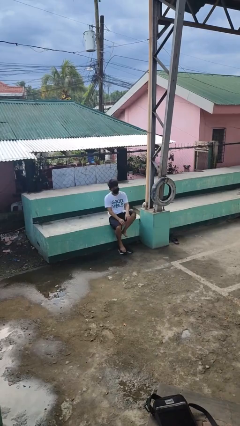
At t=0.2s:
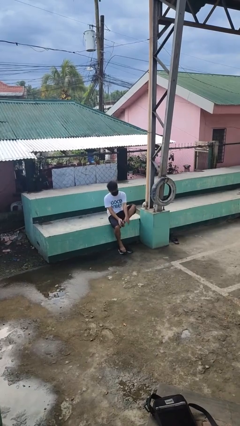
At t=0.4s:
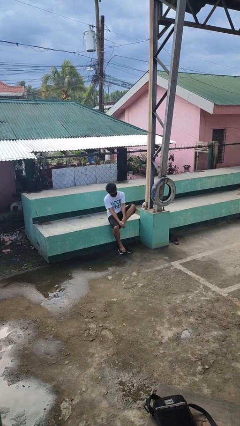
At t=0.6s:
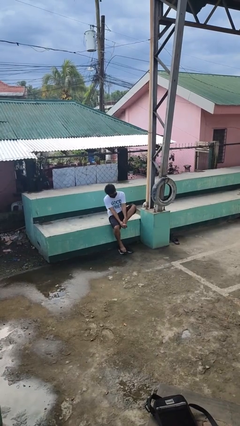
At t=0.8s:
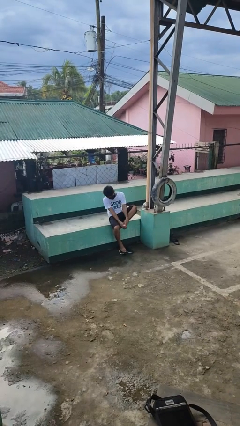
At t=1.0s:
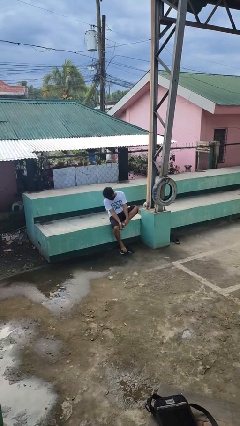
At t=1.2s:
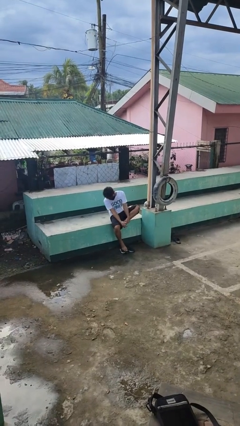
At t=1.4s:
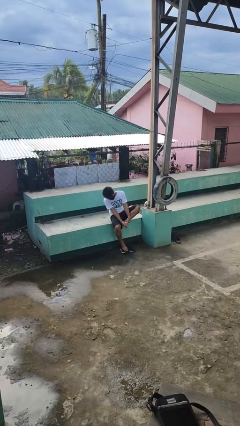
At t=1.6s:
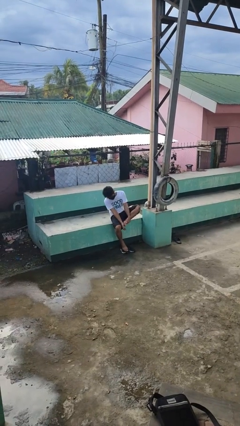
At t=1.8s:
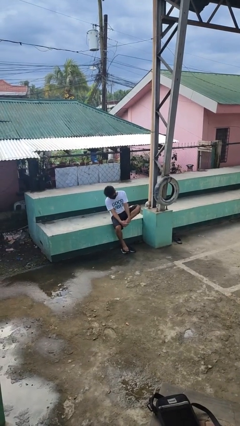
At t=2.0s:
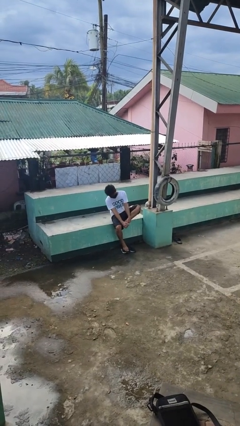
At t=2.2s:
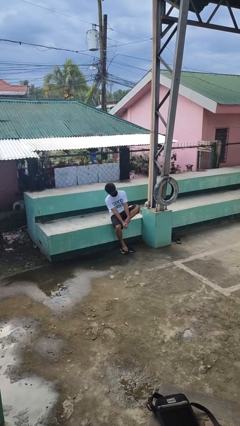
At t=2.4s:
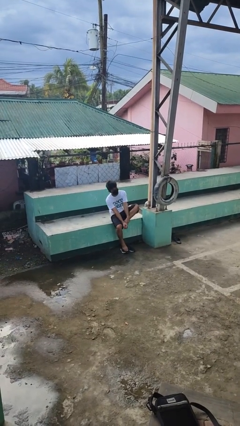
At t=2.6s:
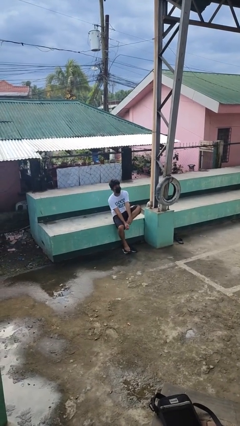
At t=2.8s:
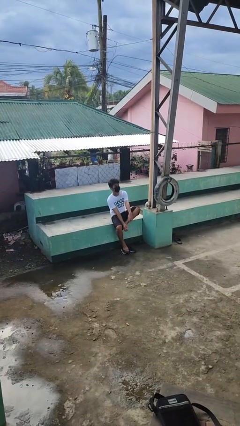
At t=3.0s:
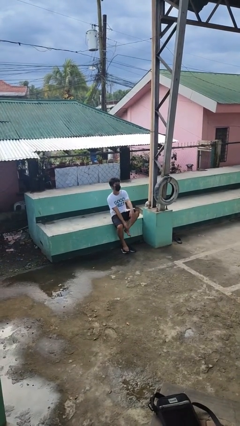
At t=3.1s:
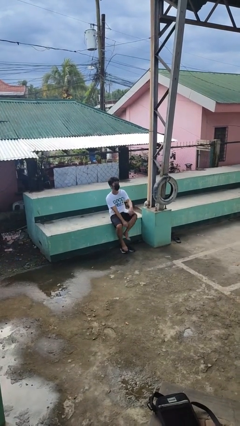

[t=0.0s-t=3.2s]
person rubs foot

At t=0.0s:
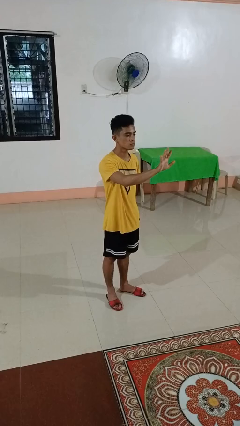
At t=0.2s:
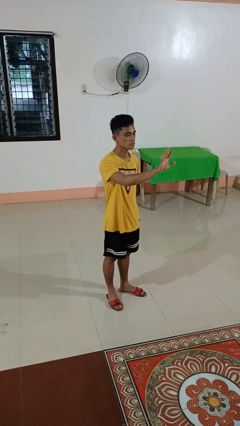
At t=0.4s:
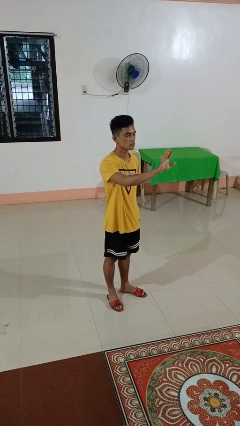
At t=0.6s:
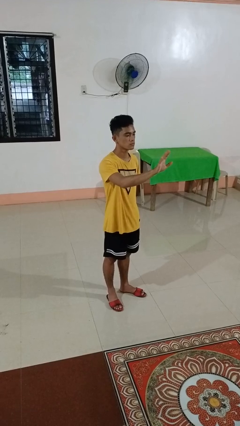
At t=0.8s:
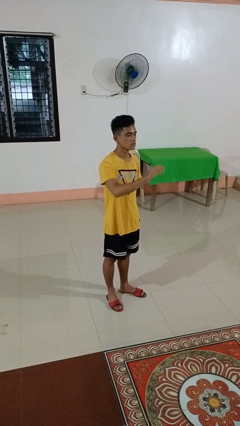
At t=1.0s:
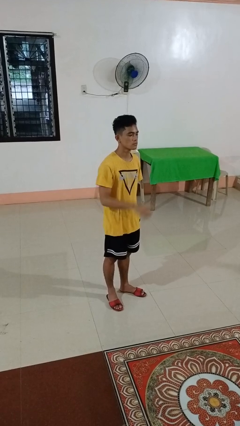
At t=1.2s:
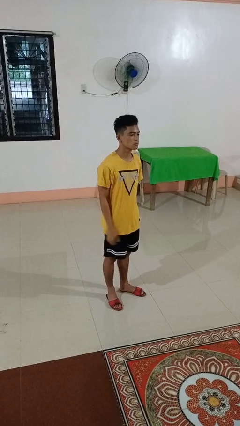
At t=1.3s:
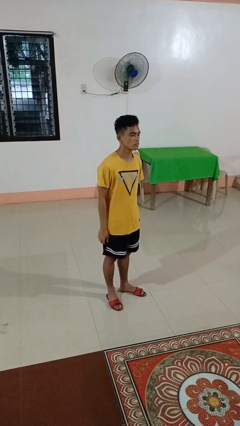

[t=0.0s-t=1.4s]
person gestures number five

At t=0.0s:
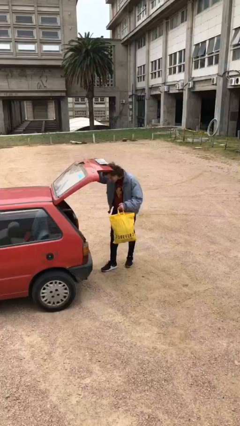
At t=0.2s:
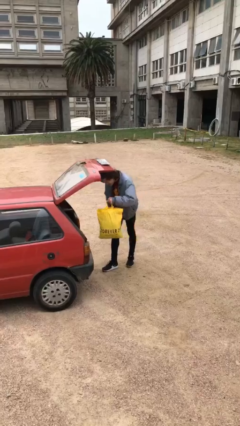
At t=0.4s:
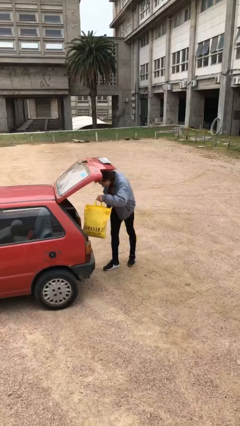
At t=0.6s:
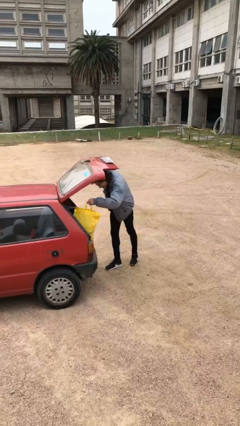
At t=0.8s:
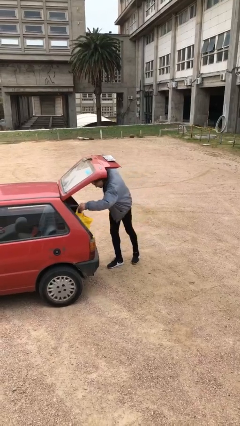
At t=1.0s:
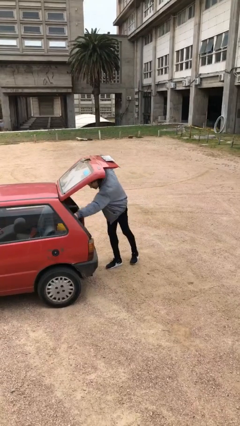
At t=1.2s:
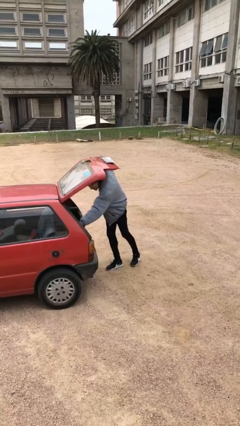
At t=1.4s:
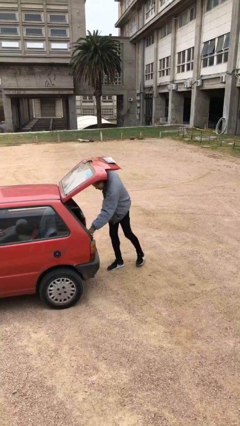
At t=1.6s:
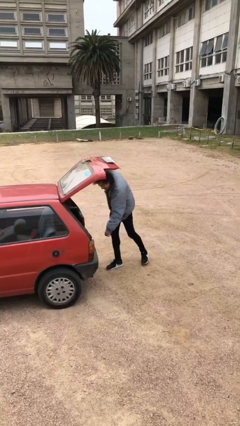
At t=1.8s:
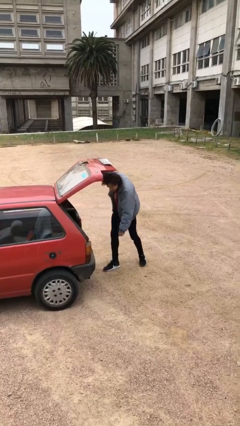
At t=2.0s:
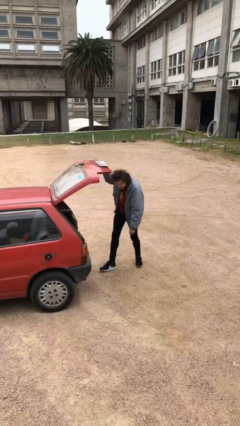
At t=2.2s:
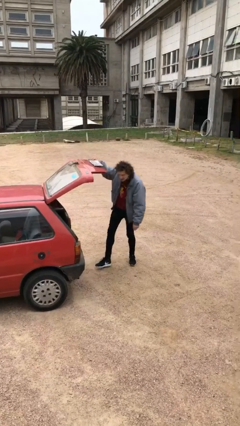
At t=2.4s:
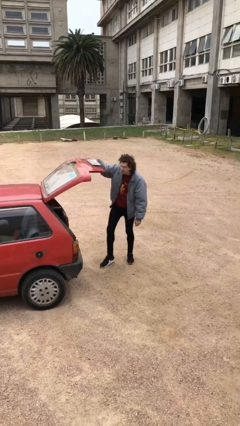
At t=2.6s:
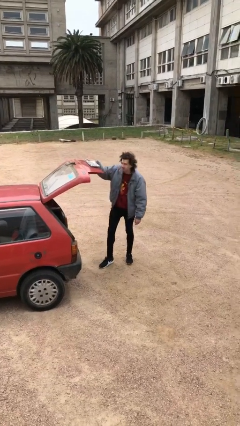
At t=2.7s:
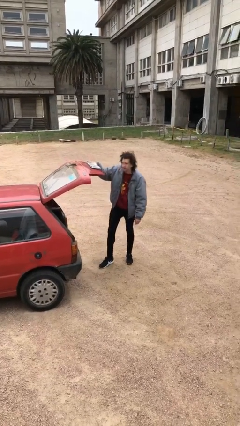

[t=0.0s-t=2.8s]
person loads car

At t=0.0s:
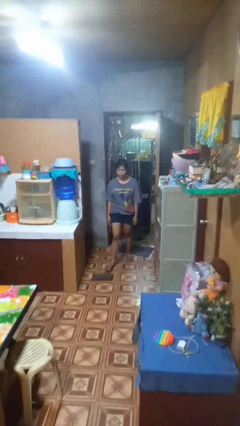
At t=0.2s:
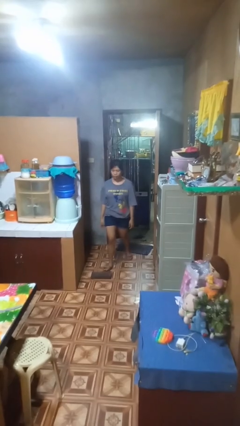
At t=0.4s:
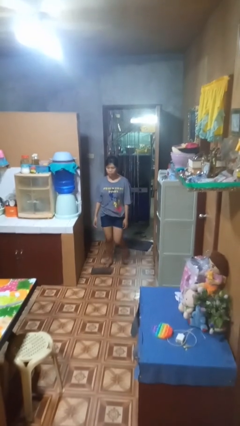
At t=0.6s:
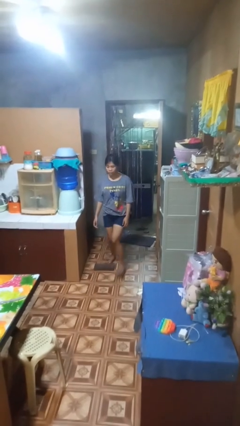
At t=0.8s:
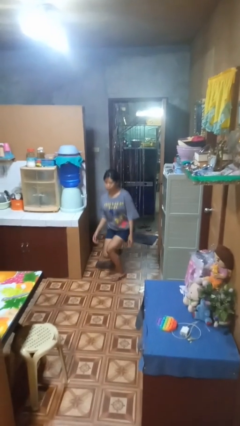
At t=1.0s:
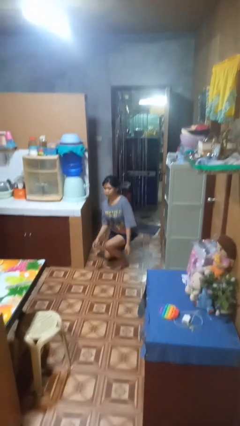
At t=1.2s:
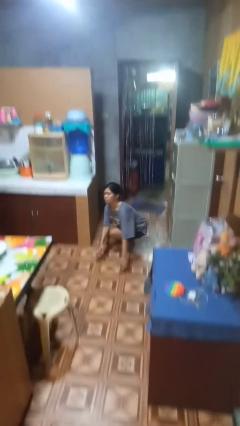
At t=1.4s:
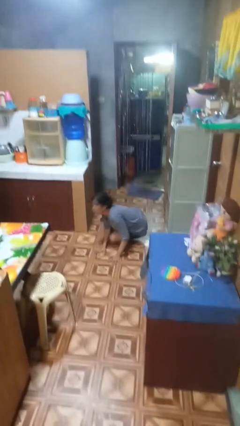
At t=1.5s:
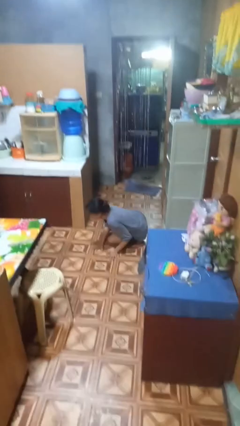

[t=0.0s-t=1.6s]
person trips on object on floor

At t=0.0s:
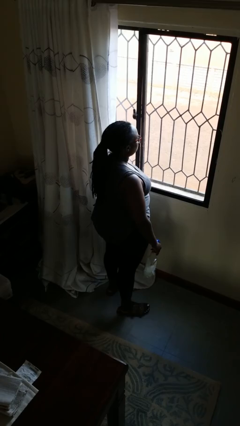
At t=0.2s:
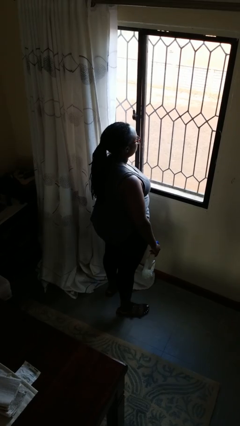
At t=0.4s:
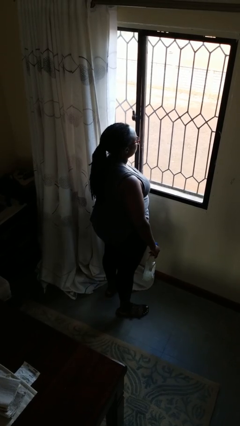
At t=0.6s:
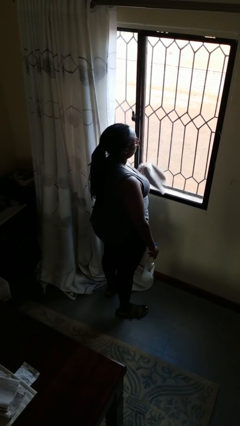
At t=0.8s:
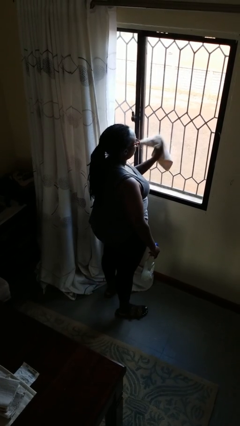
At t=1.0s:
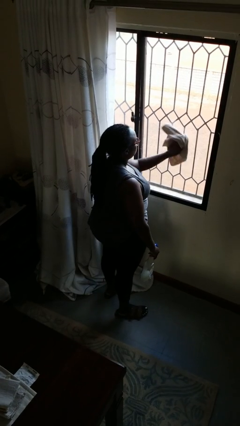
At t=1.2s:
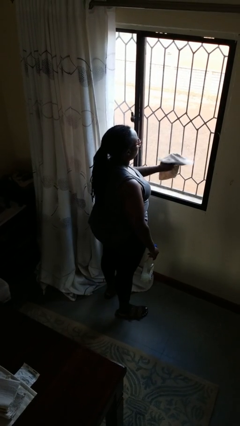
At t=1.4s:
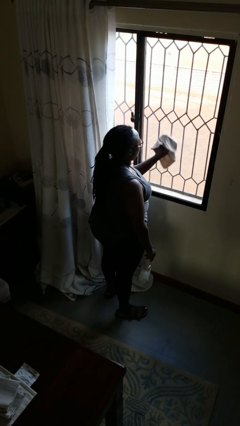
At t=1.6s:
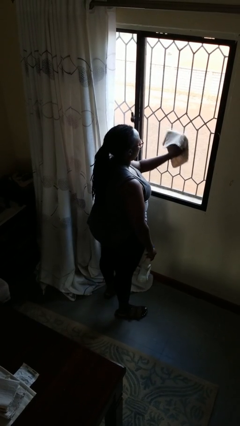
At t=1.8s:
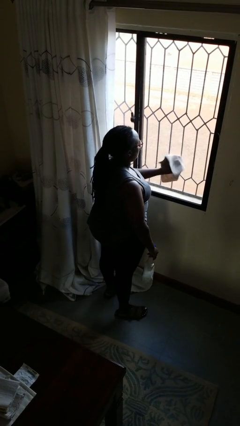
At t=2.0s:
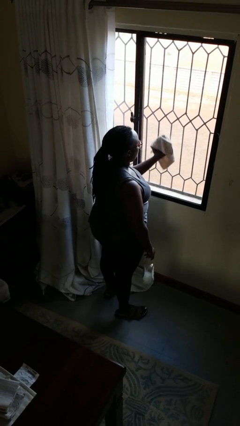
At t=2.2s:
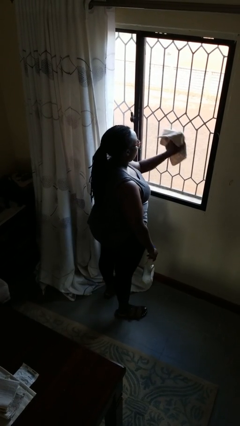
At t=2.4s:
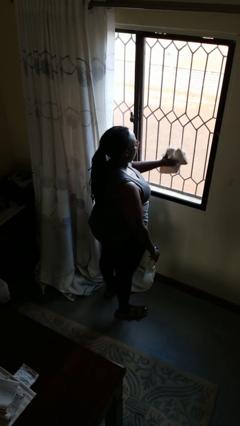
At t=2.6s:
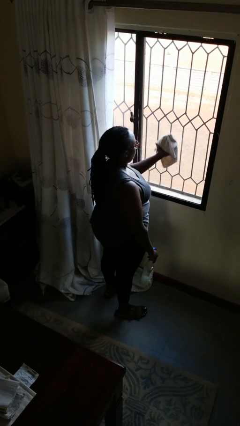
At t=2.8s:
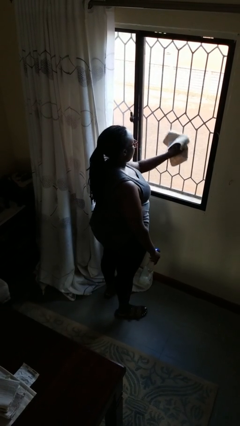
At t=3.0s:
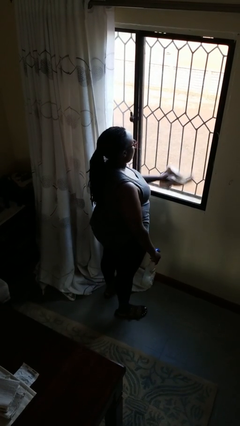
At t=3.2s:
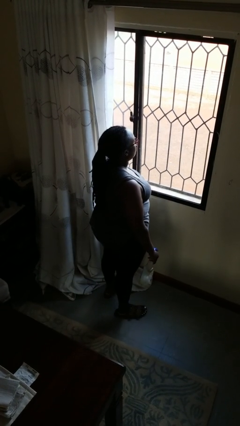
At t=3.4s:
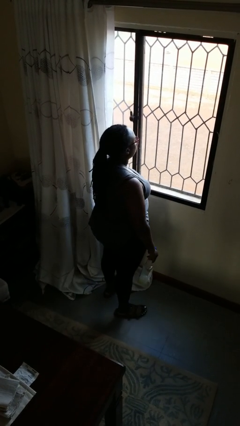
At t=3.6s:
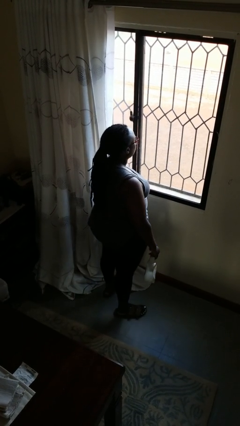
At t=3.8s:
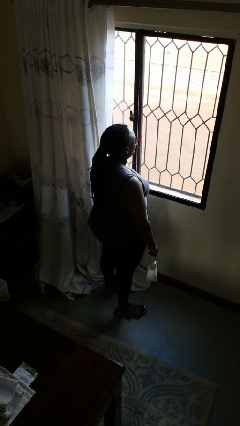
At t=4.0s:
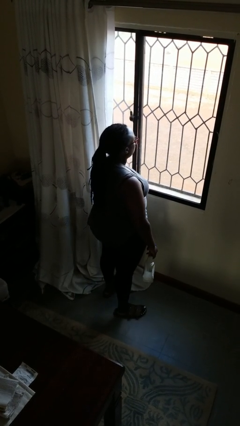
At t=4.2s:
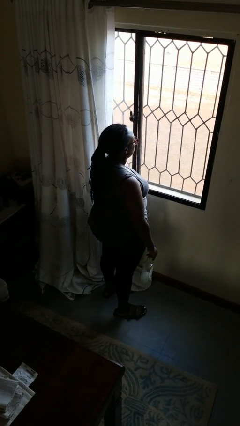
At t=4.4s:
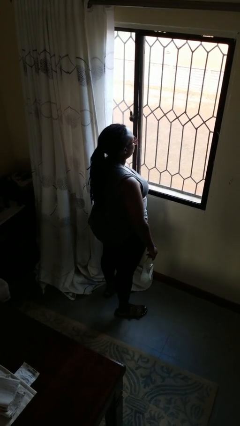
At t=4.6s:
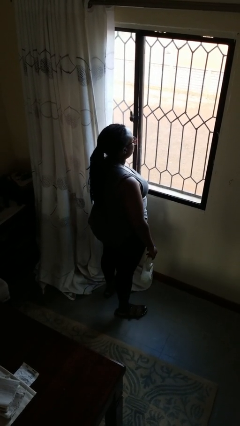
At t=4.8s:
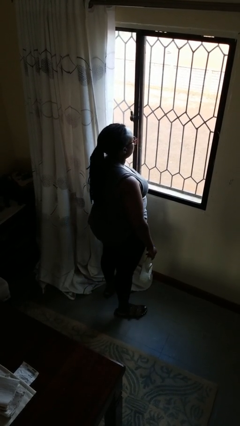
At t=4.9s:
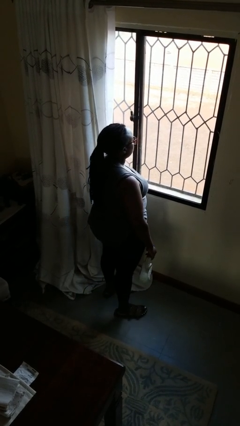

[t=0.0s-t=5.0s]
person washes window

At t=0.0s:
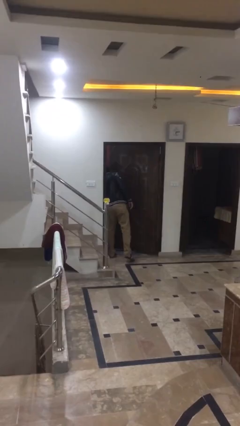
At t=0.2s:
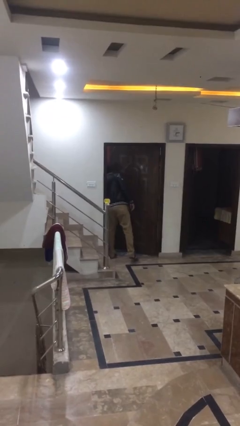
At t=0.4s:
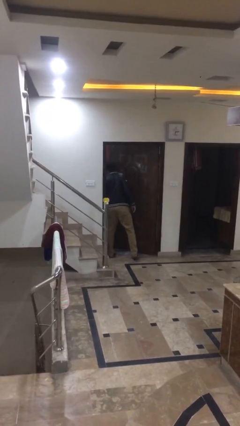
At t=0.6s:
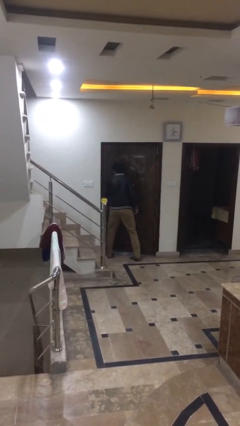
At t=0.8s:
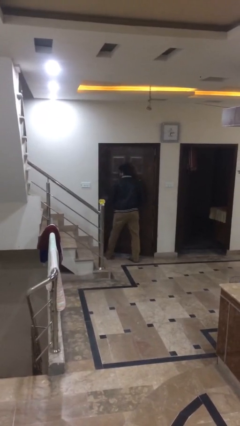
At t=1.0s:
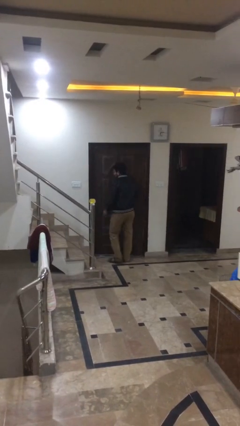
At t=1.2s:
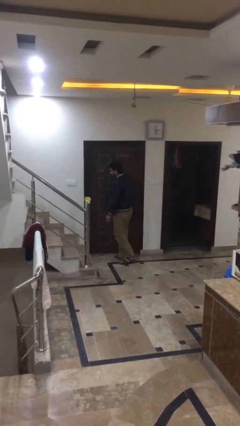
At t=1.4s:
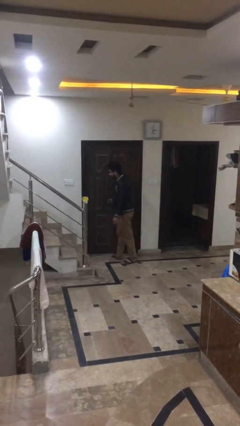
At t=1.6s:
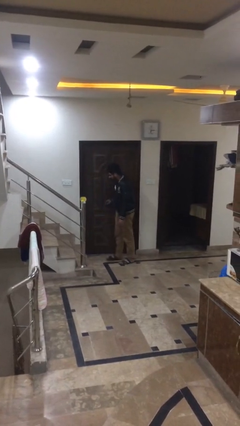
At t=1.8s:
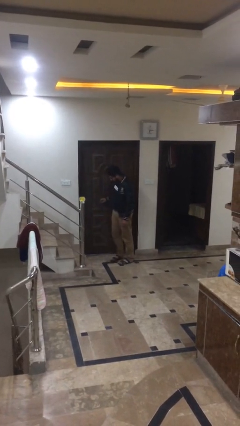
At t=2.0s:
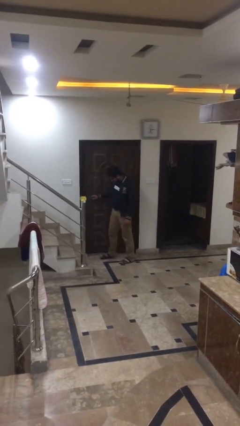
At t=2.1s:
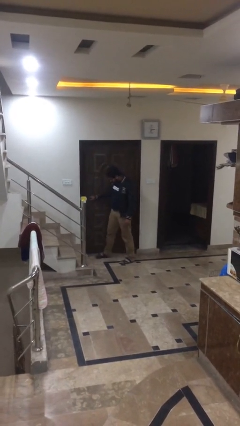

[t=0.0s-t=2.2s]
person closes facility door

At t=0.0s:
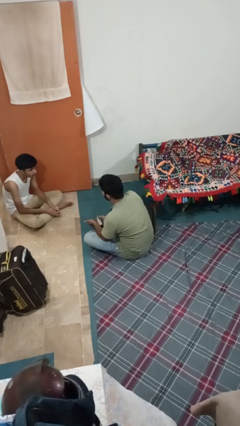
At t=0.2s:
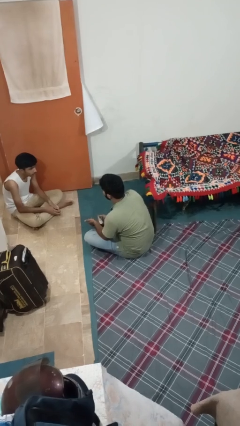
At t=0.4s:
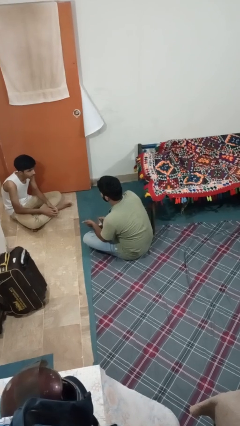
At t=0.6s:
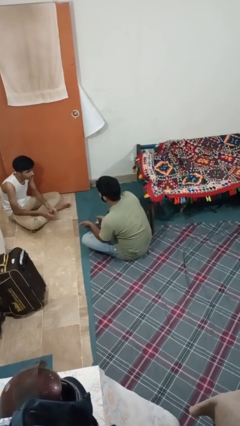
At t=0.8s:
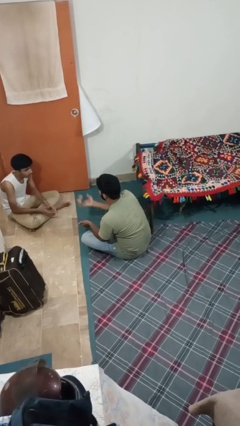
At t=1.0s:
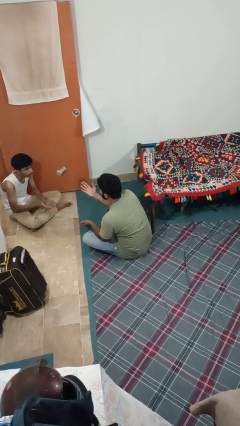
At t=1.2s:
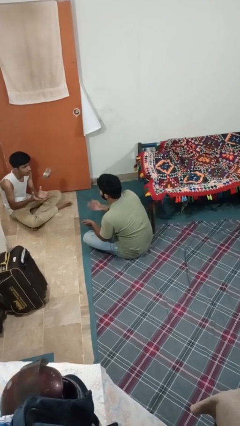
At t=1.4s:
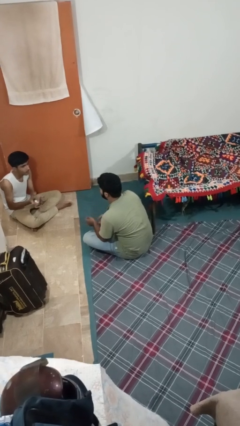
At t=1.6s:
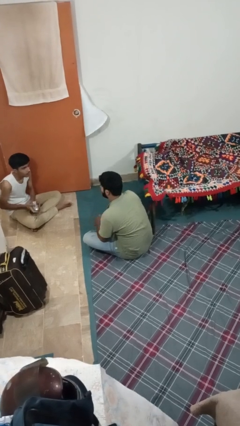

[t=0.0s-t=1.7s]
person throws object to person
